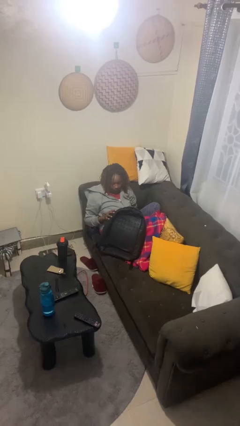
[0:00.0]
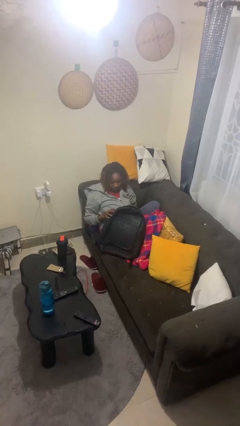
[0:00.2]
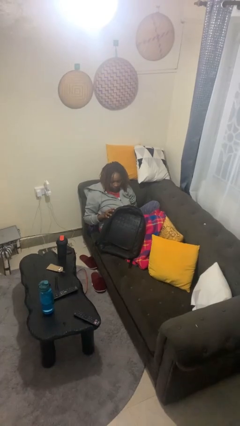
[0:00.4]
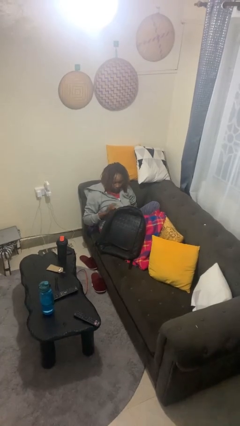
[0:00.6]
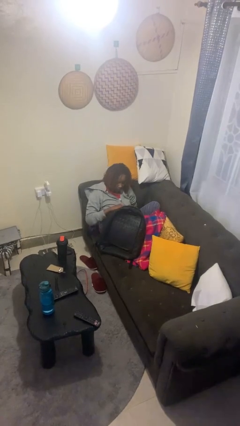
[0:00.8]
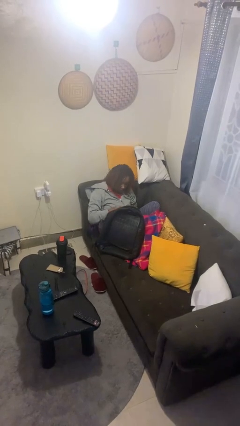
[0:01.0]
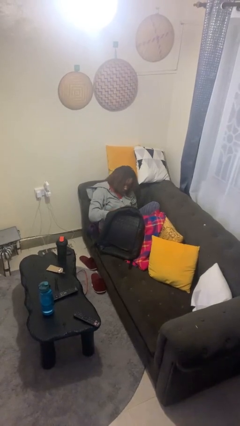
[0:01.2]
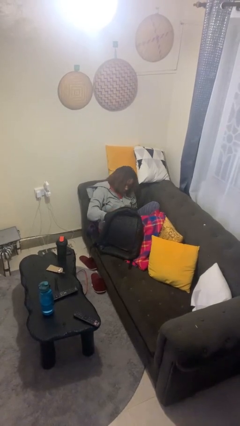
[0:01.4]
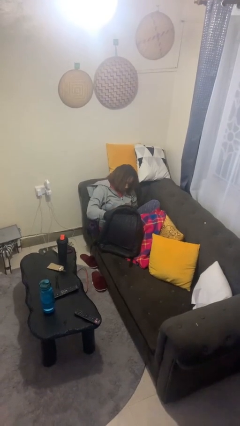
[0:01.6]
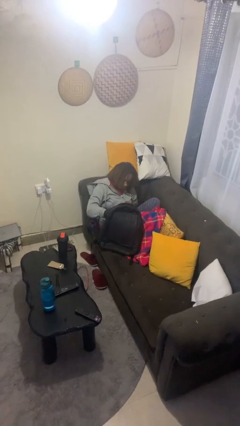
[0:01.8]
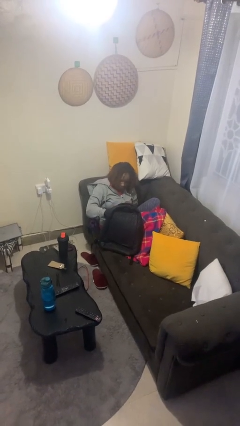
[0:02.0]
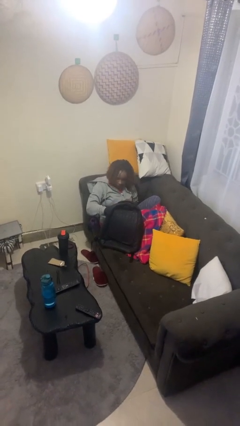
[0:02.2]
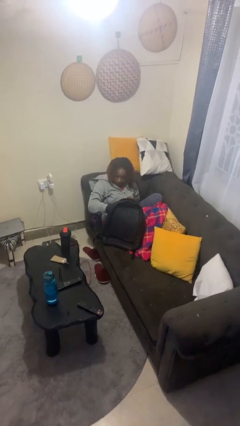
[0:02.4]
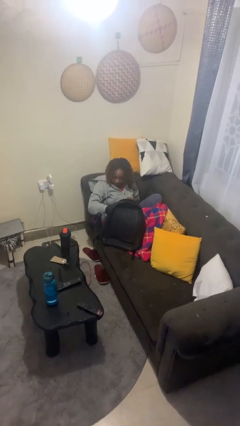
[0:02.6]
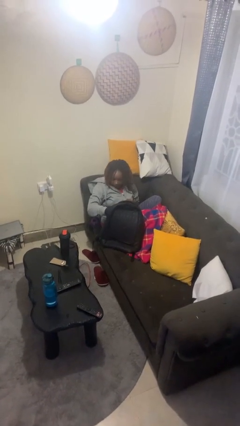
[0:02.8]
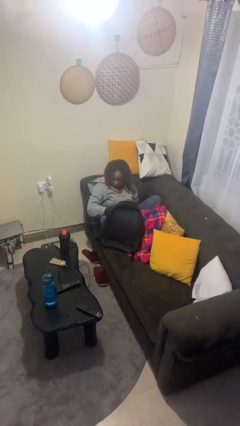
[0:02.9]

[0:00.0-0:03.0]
person searches in backpack

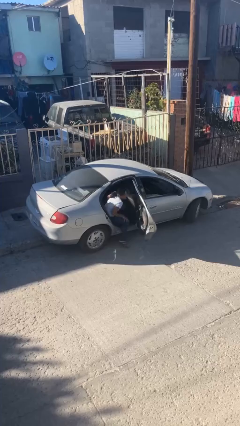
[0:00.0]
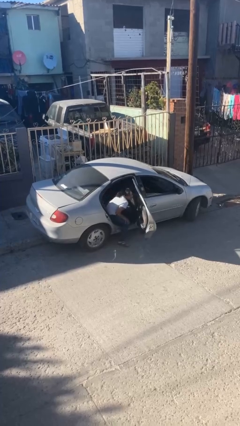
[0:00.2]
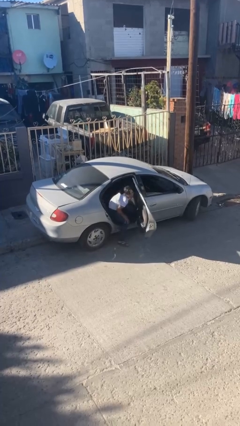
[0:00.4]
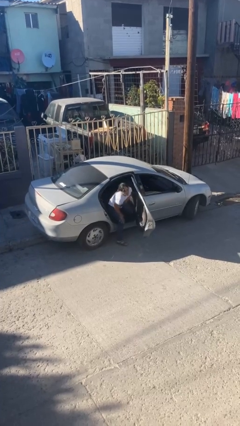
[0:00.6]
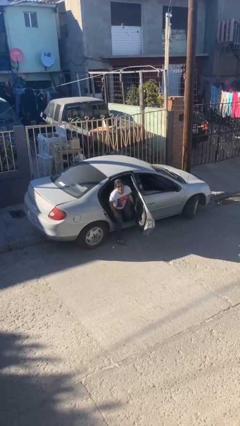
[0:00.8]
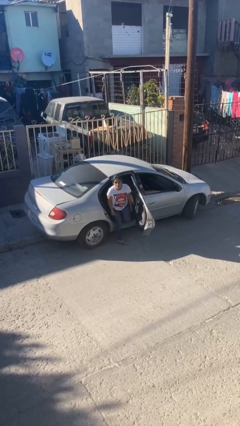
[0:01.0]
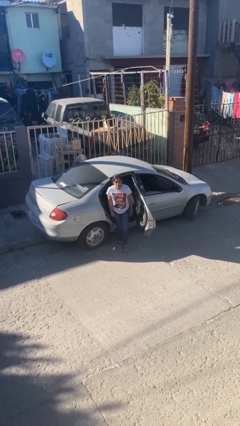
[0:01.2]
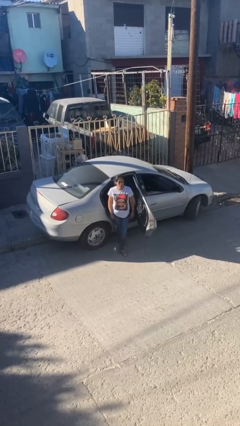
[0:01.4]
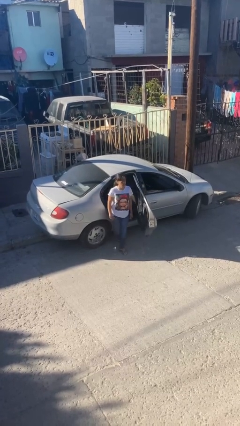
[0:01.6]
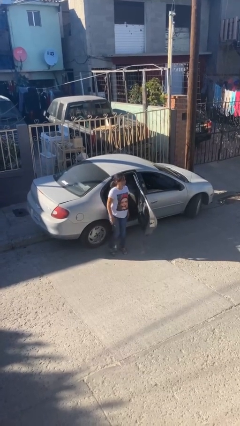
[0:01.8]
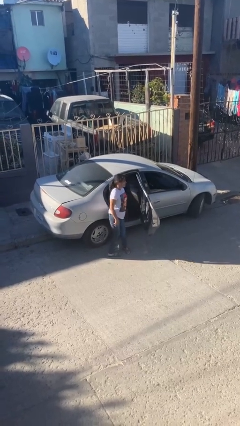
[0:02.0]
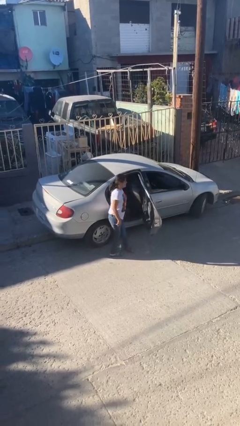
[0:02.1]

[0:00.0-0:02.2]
person exits car

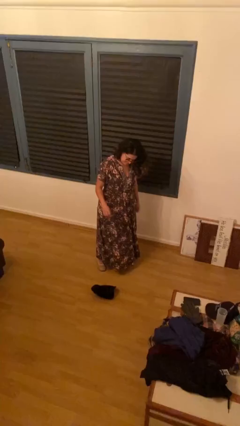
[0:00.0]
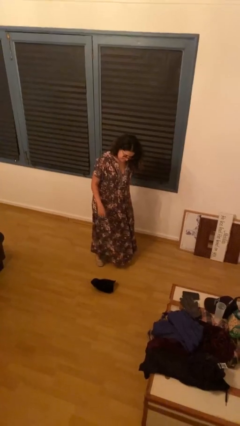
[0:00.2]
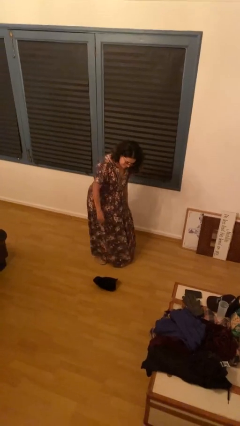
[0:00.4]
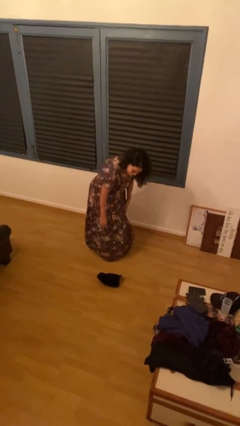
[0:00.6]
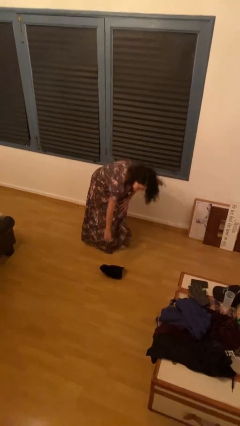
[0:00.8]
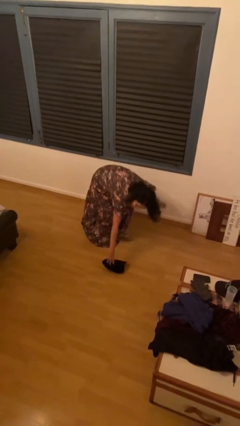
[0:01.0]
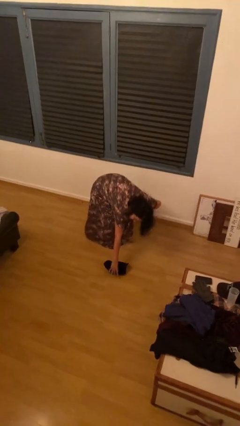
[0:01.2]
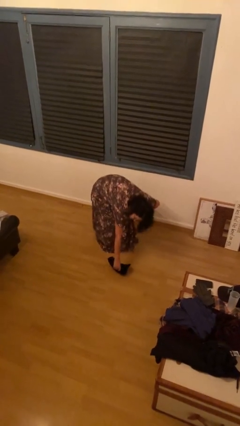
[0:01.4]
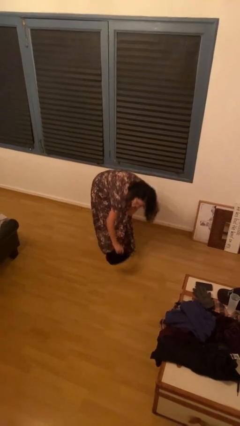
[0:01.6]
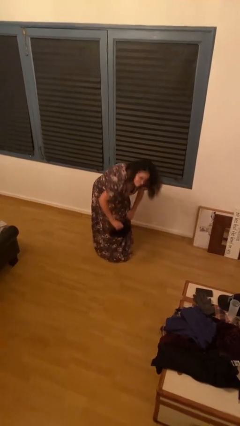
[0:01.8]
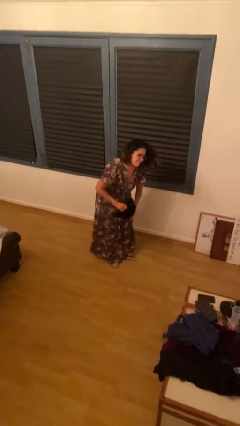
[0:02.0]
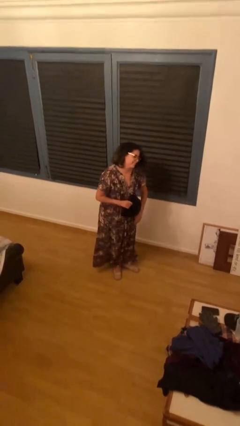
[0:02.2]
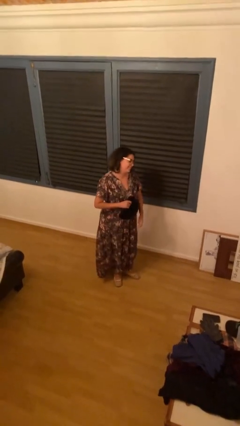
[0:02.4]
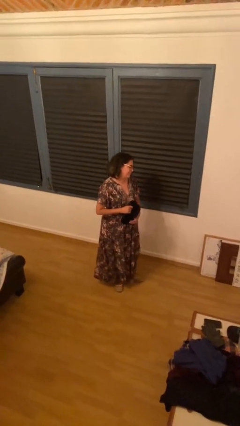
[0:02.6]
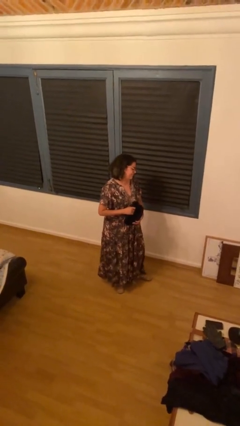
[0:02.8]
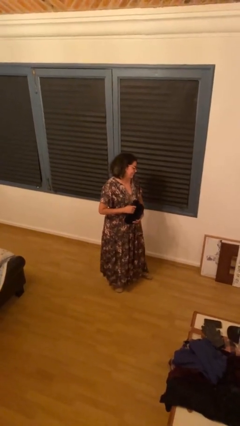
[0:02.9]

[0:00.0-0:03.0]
person picks up object from floor

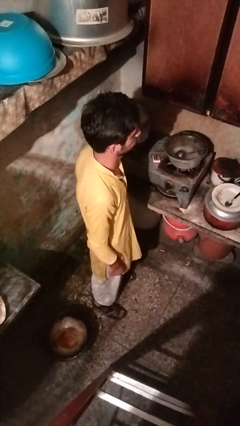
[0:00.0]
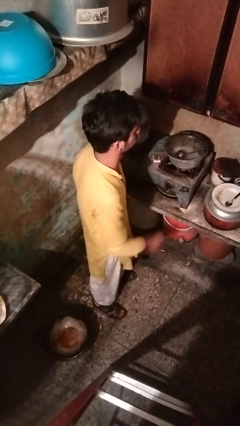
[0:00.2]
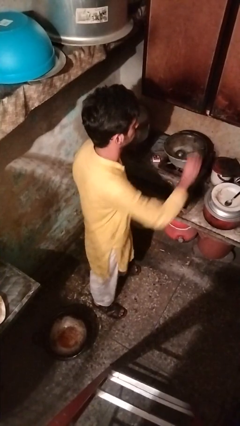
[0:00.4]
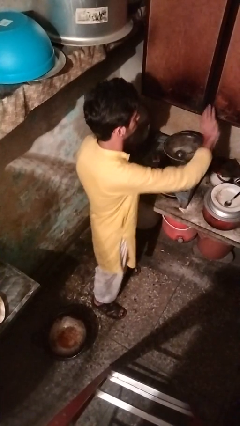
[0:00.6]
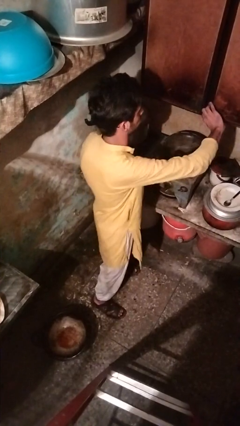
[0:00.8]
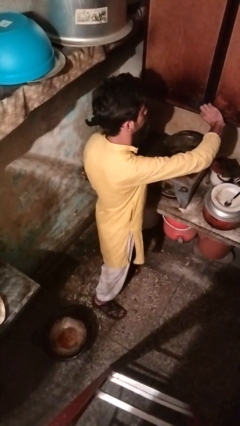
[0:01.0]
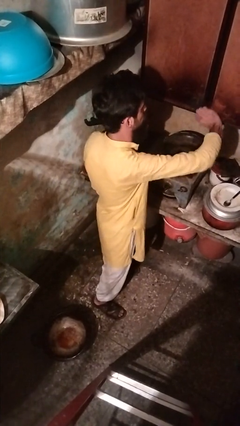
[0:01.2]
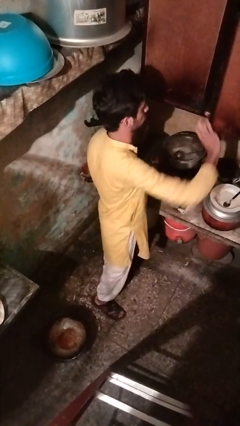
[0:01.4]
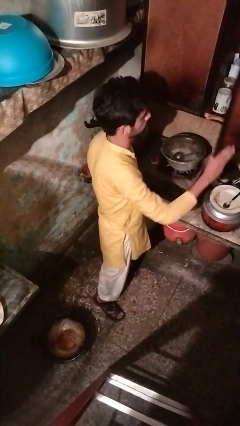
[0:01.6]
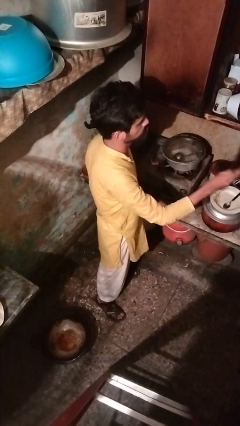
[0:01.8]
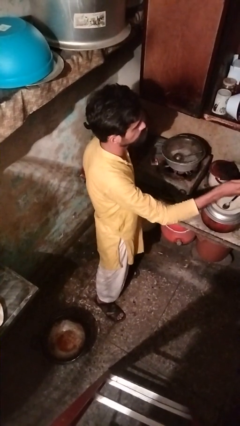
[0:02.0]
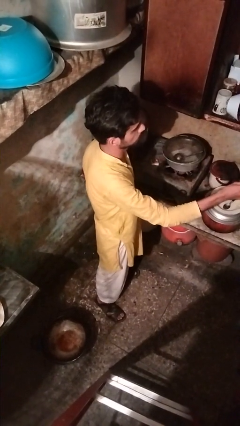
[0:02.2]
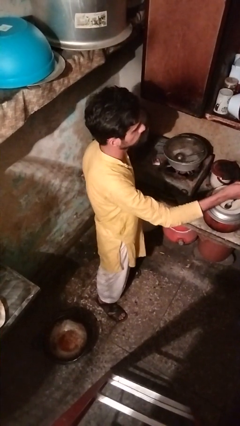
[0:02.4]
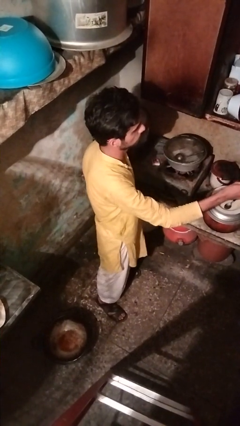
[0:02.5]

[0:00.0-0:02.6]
person opens cabinet

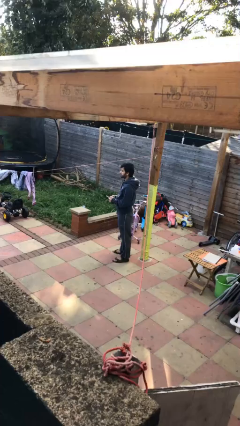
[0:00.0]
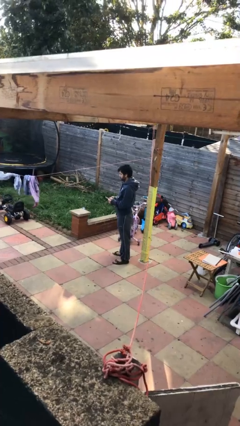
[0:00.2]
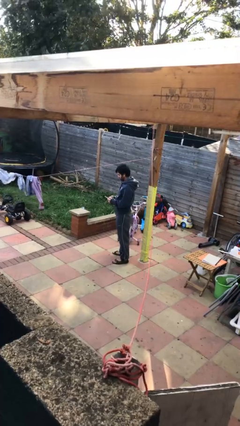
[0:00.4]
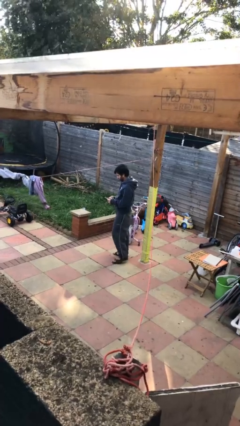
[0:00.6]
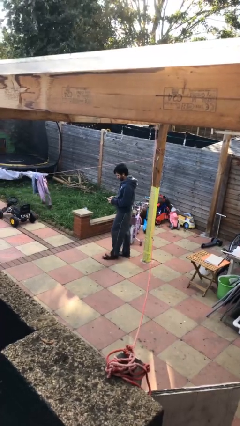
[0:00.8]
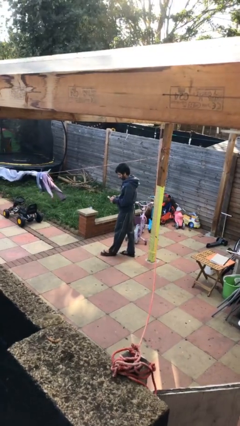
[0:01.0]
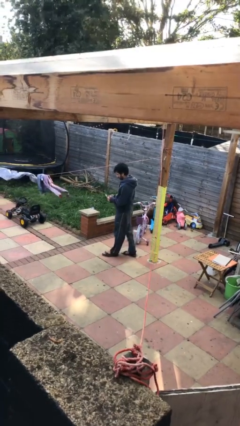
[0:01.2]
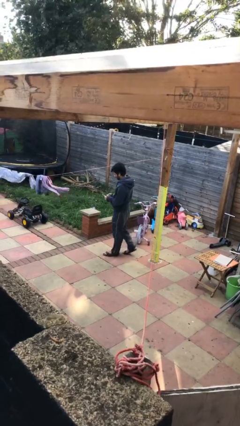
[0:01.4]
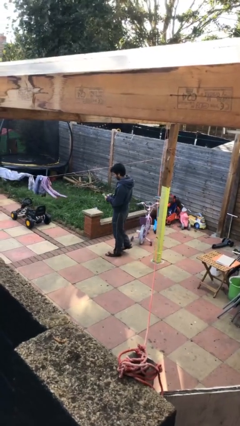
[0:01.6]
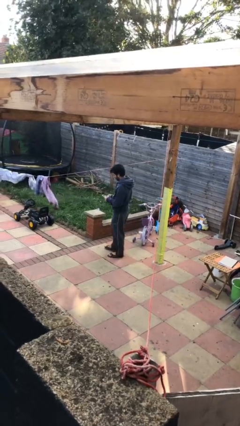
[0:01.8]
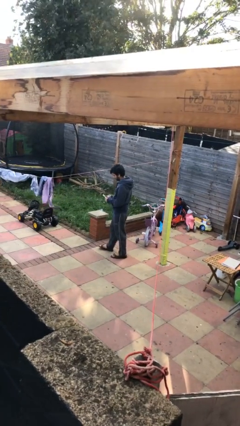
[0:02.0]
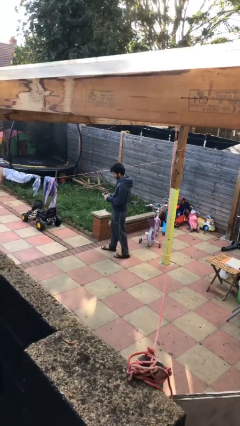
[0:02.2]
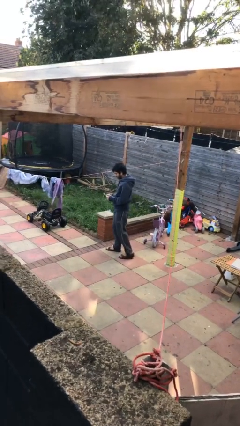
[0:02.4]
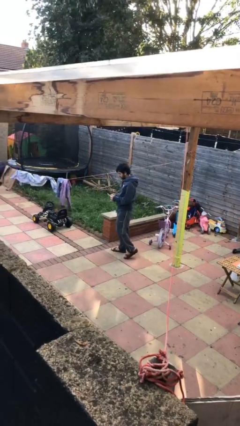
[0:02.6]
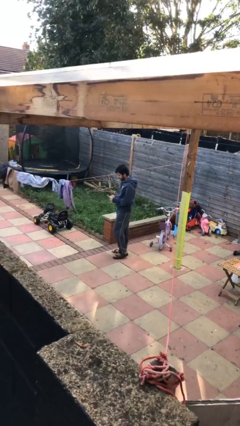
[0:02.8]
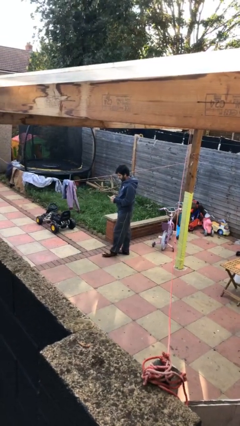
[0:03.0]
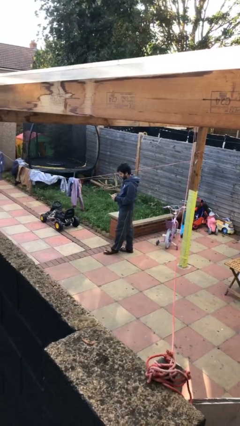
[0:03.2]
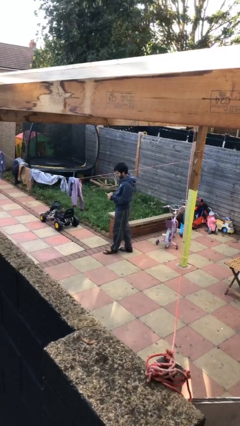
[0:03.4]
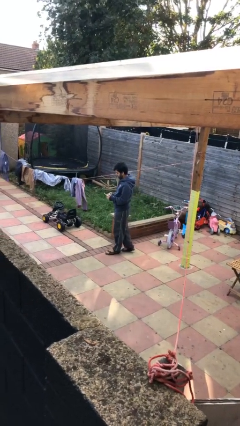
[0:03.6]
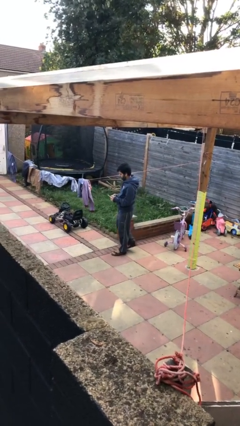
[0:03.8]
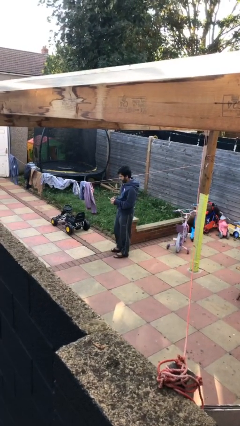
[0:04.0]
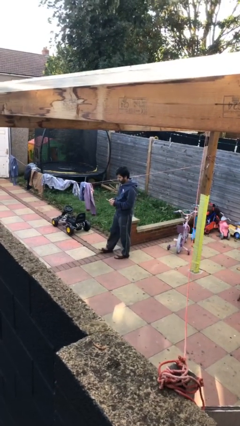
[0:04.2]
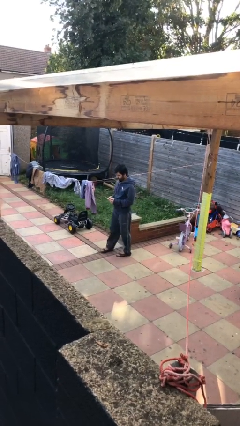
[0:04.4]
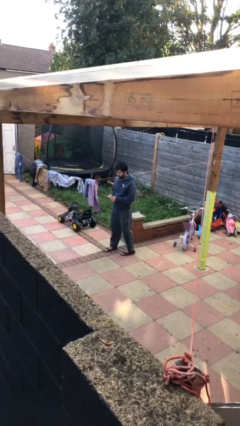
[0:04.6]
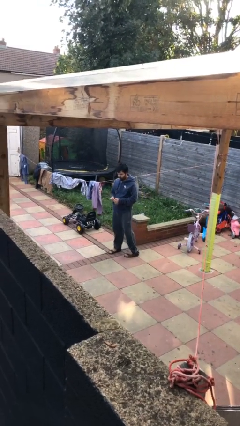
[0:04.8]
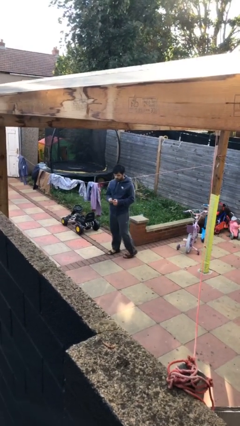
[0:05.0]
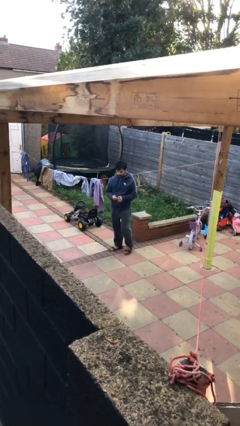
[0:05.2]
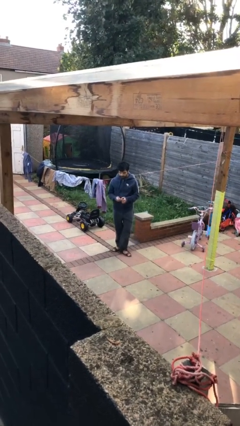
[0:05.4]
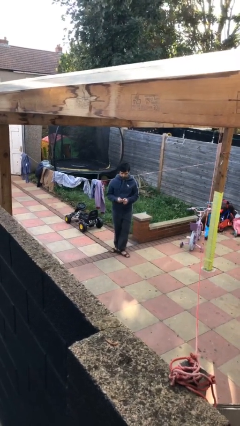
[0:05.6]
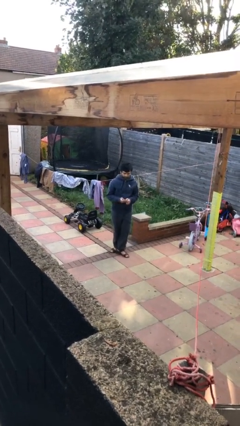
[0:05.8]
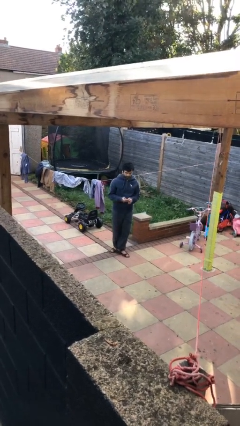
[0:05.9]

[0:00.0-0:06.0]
person texts on phone

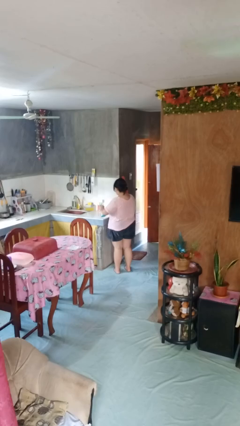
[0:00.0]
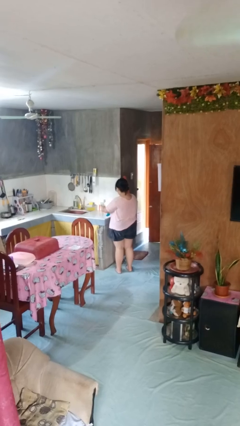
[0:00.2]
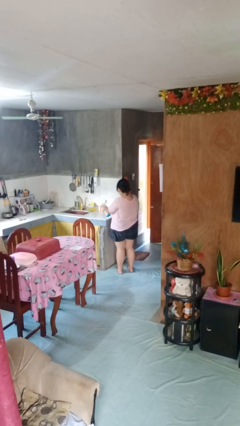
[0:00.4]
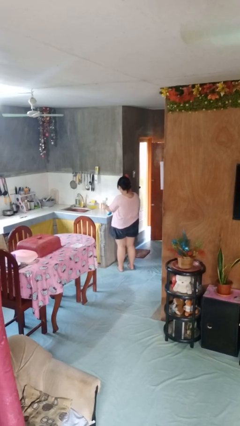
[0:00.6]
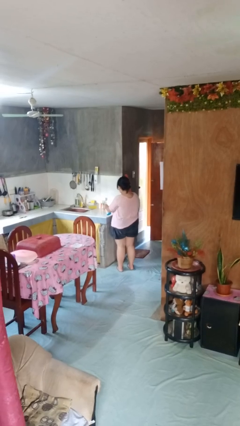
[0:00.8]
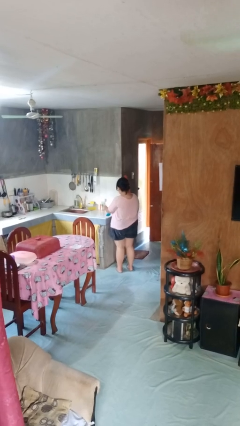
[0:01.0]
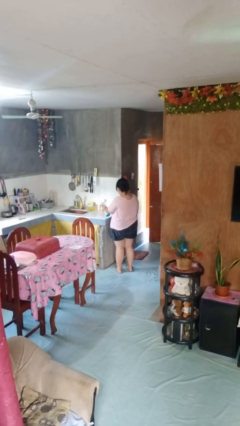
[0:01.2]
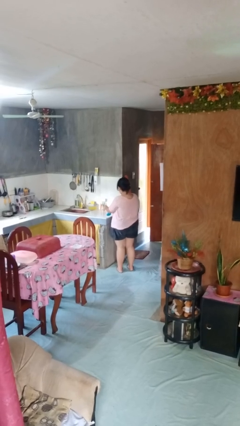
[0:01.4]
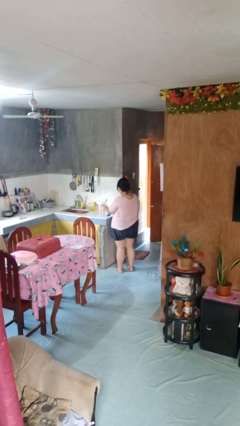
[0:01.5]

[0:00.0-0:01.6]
person sprays from bottle
